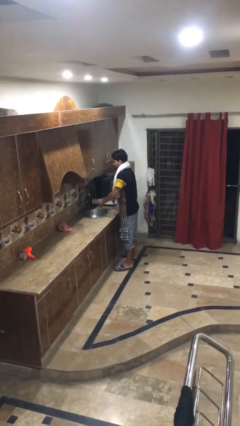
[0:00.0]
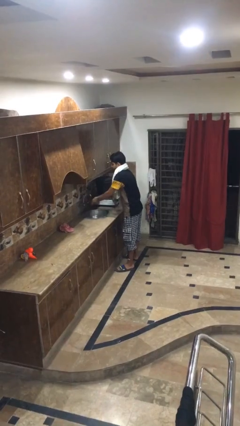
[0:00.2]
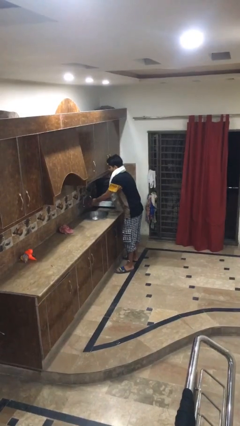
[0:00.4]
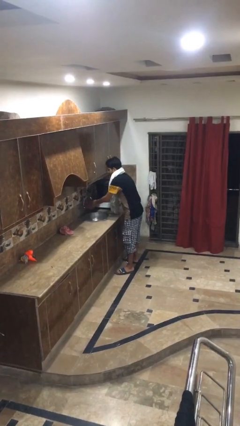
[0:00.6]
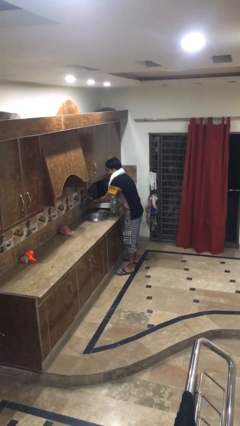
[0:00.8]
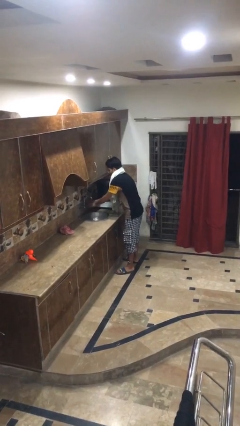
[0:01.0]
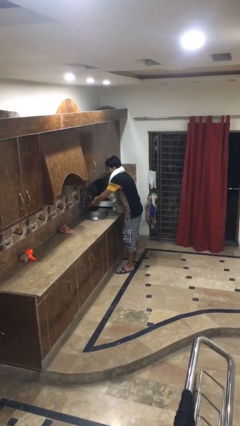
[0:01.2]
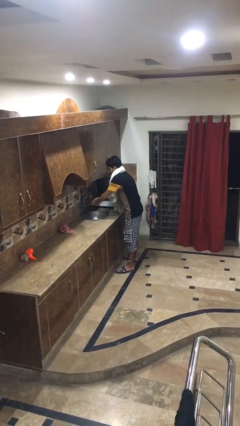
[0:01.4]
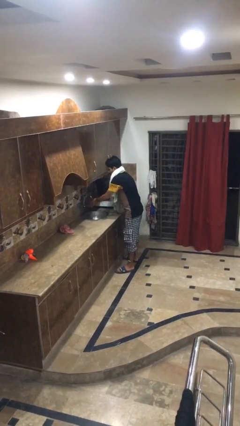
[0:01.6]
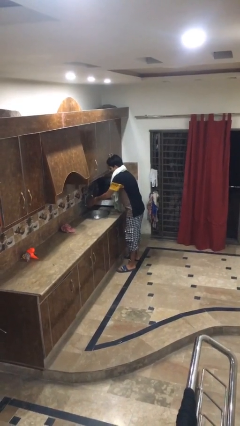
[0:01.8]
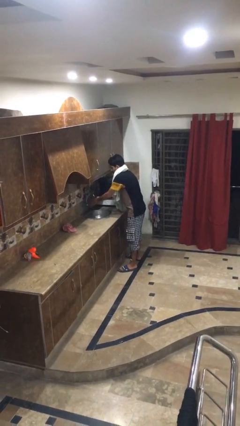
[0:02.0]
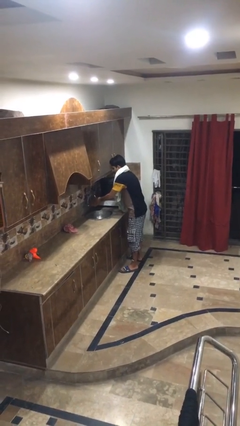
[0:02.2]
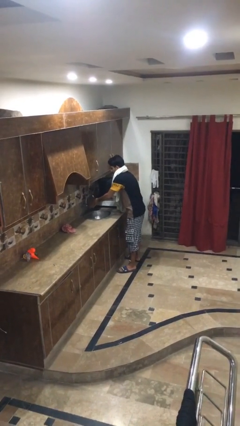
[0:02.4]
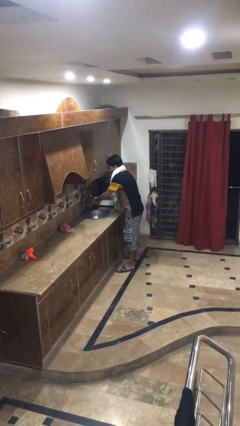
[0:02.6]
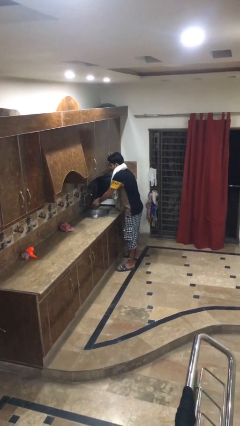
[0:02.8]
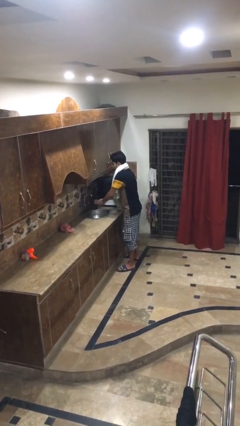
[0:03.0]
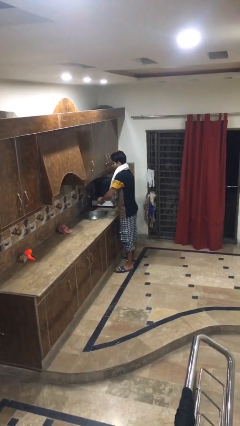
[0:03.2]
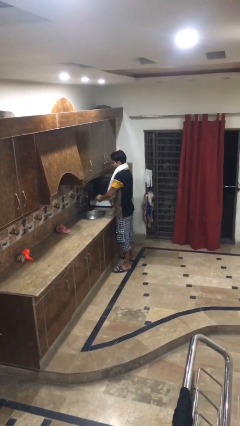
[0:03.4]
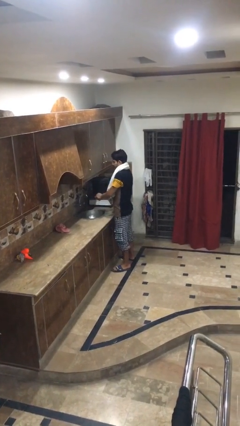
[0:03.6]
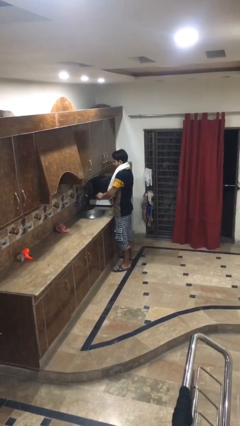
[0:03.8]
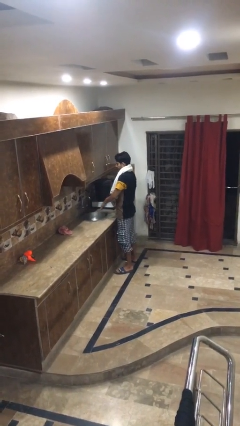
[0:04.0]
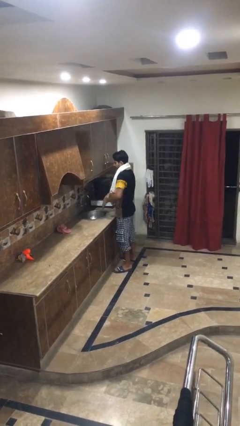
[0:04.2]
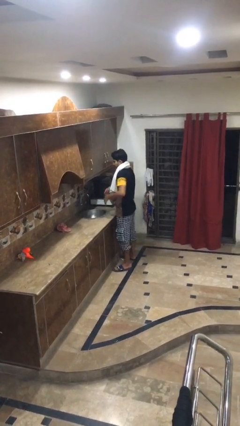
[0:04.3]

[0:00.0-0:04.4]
person washes hands

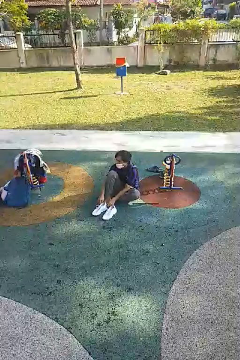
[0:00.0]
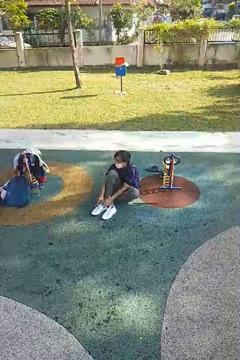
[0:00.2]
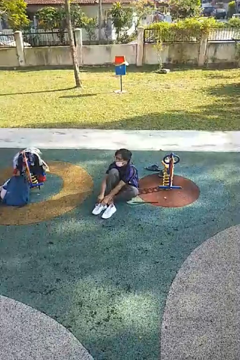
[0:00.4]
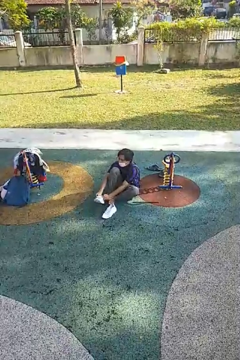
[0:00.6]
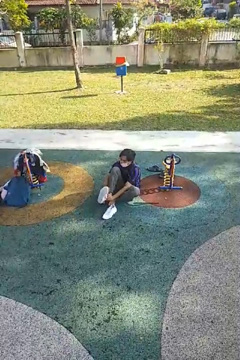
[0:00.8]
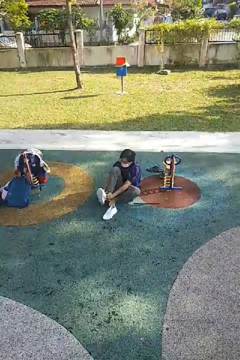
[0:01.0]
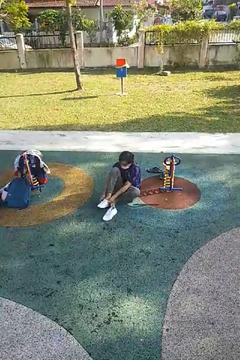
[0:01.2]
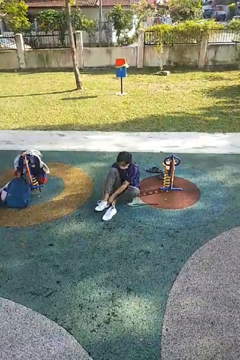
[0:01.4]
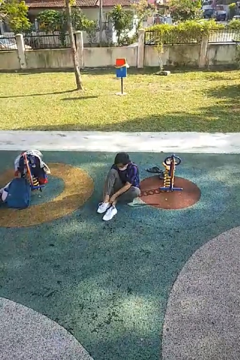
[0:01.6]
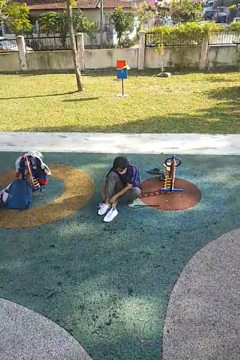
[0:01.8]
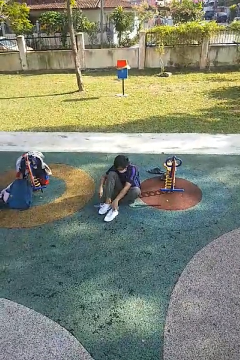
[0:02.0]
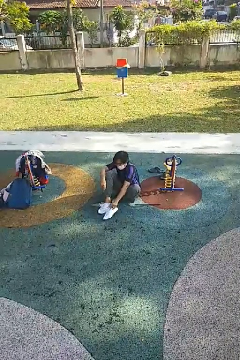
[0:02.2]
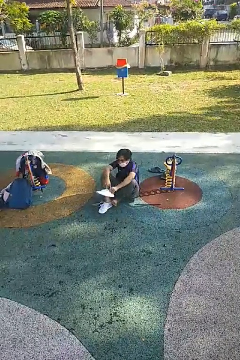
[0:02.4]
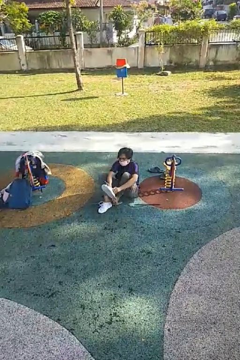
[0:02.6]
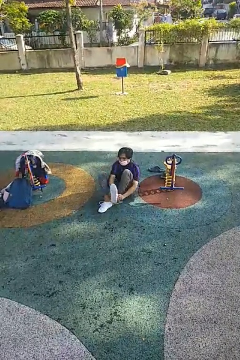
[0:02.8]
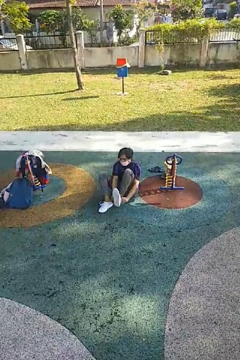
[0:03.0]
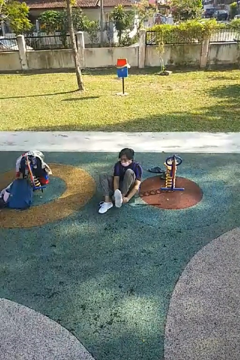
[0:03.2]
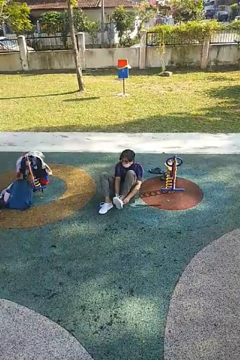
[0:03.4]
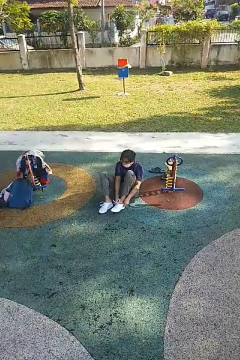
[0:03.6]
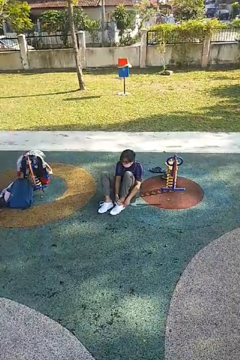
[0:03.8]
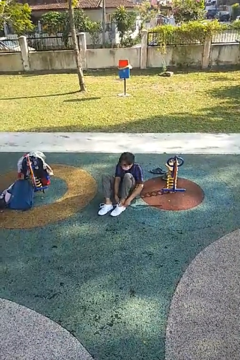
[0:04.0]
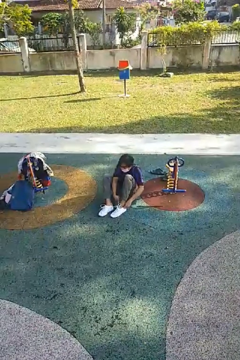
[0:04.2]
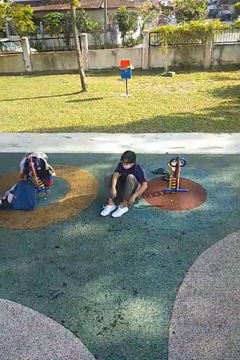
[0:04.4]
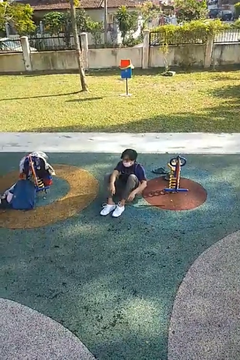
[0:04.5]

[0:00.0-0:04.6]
person puts on shoes

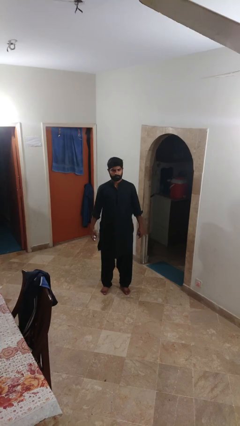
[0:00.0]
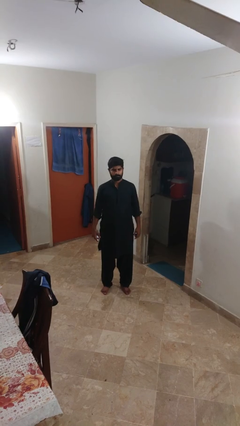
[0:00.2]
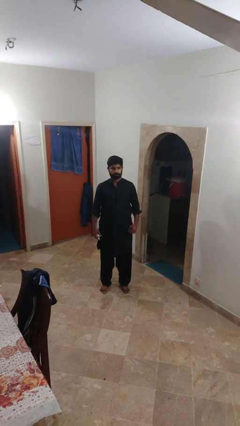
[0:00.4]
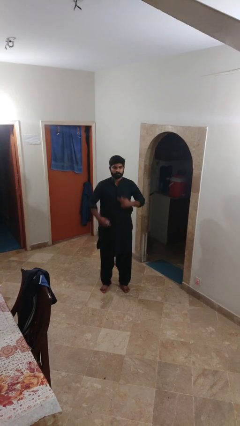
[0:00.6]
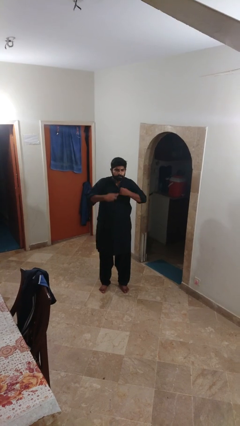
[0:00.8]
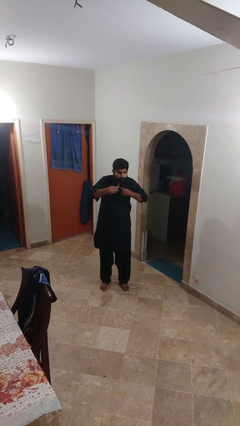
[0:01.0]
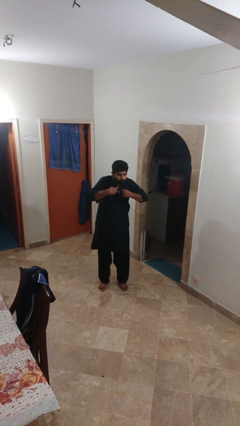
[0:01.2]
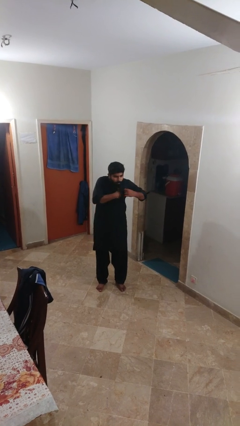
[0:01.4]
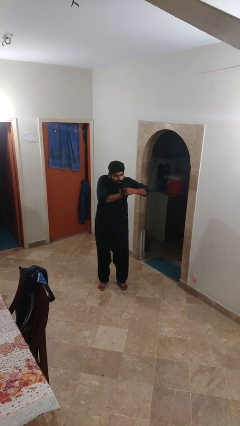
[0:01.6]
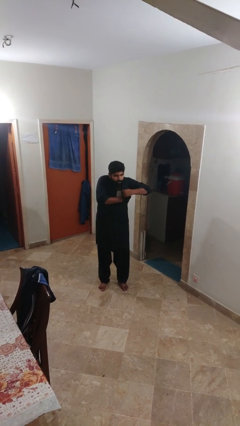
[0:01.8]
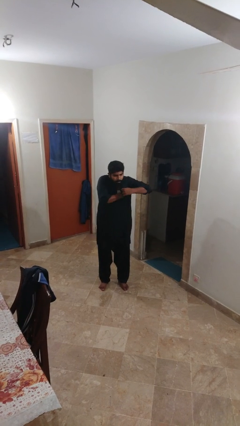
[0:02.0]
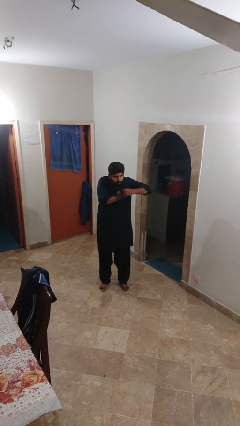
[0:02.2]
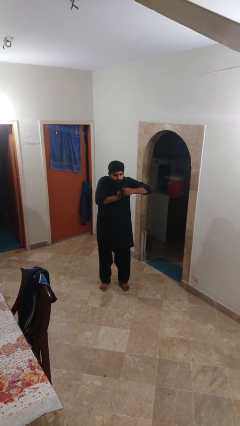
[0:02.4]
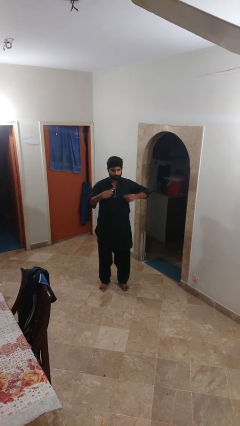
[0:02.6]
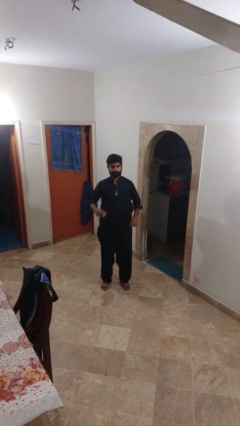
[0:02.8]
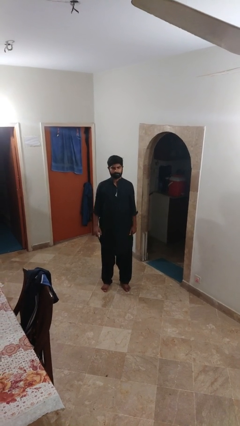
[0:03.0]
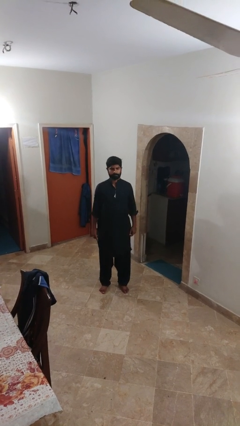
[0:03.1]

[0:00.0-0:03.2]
person applies deodorant

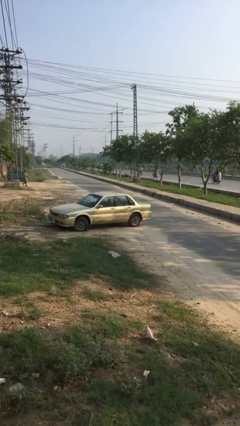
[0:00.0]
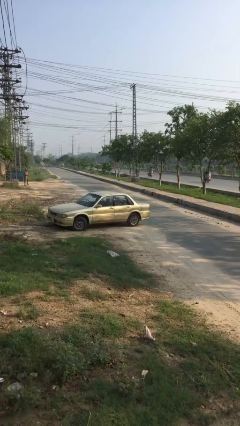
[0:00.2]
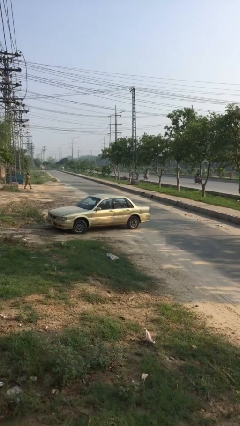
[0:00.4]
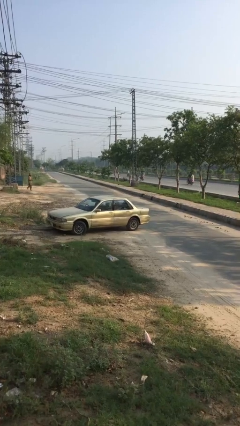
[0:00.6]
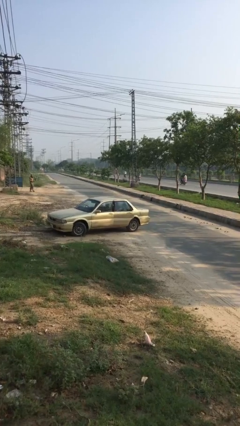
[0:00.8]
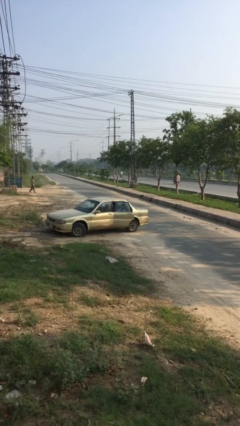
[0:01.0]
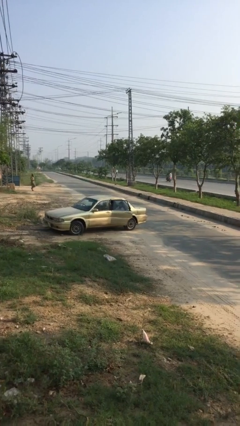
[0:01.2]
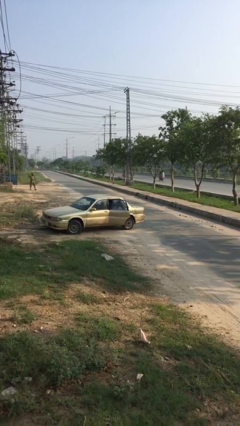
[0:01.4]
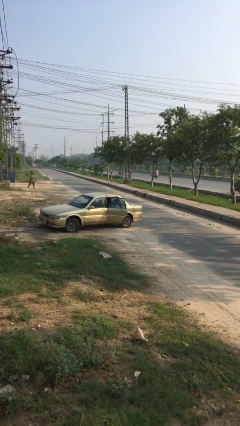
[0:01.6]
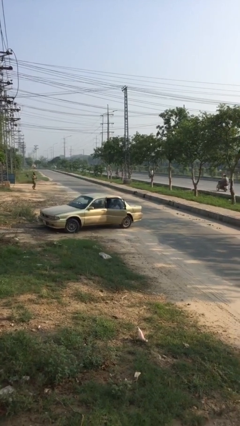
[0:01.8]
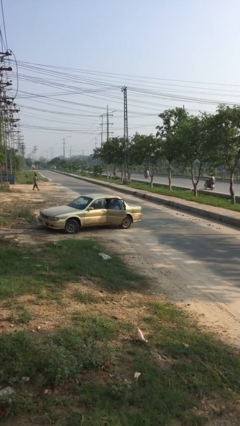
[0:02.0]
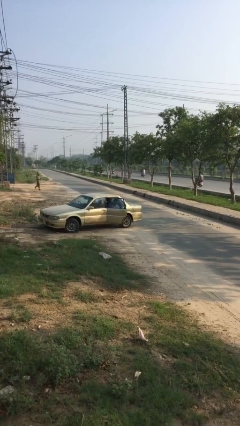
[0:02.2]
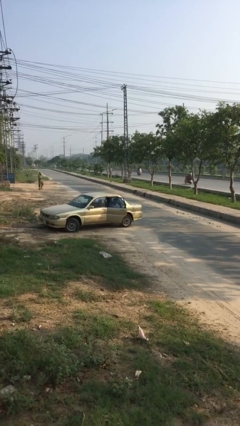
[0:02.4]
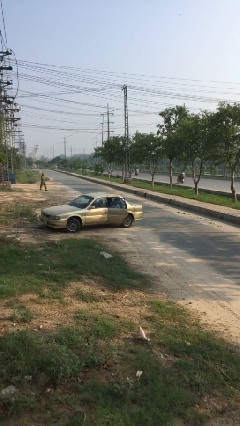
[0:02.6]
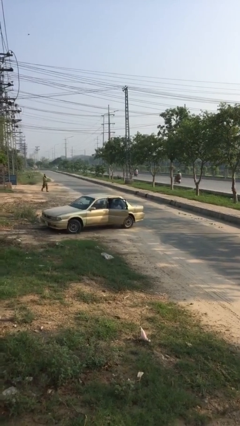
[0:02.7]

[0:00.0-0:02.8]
person opens car door

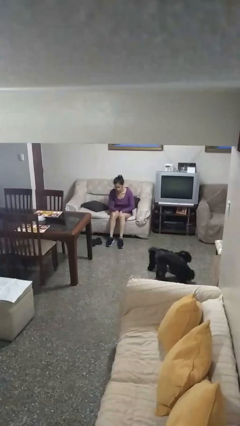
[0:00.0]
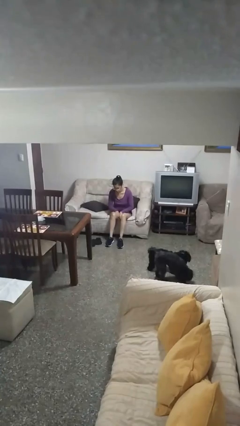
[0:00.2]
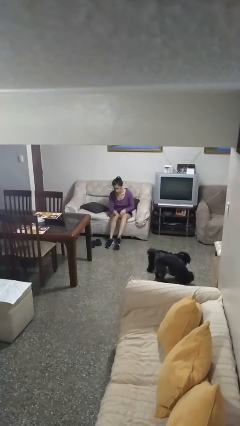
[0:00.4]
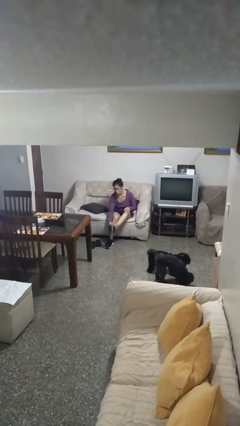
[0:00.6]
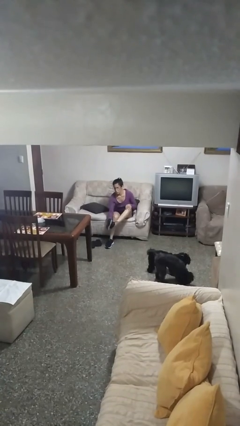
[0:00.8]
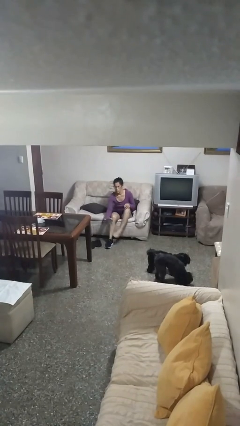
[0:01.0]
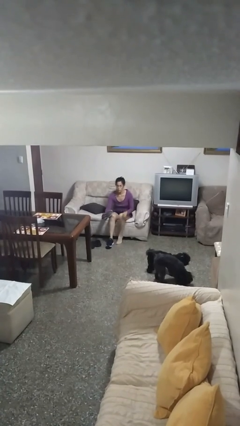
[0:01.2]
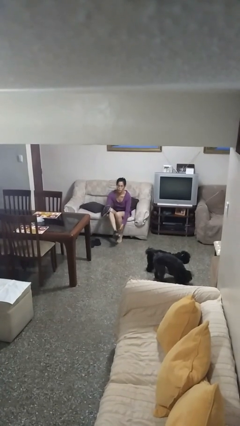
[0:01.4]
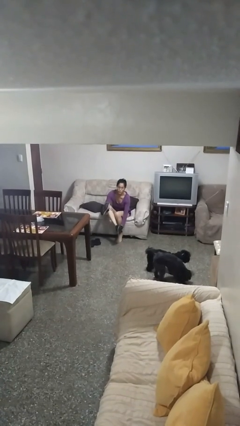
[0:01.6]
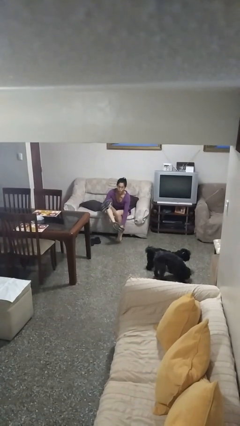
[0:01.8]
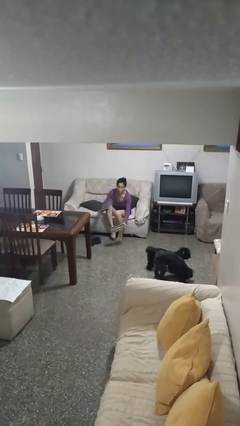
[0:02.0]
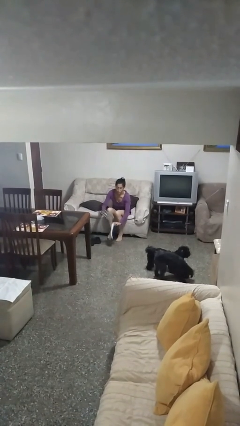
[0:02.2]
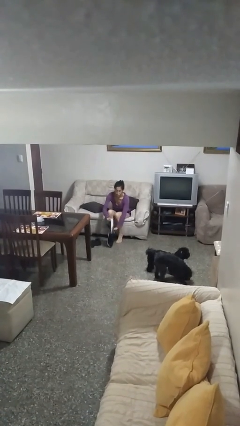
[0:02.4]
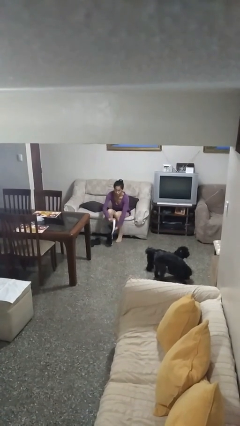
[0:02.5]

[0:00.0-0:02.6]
person takes off shoes

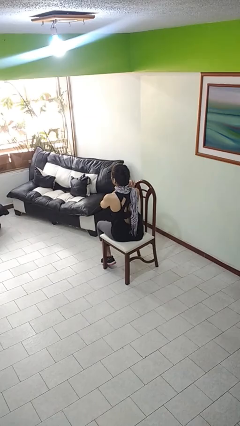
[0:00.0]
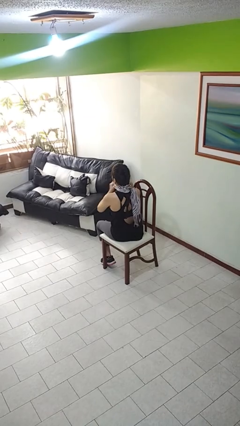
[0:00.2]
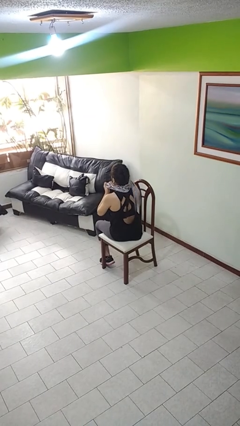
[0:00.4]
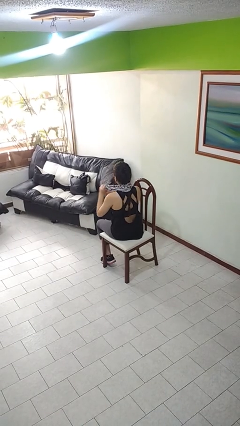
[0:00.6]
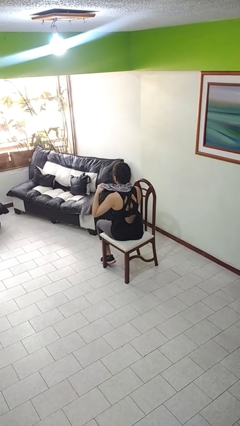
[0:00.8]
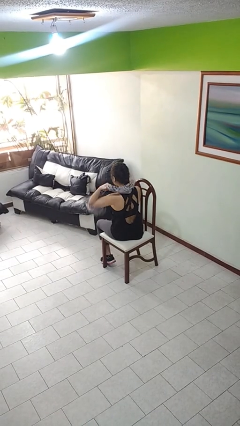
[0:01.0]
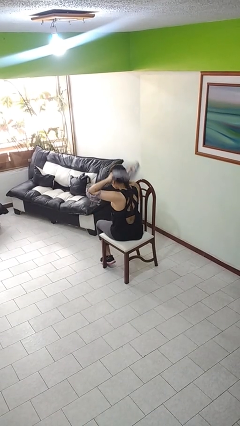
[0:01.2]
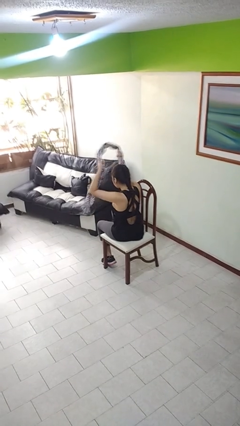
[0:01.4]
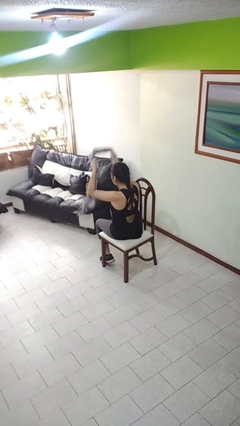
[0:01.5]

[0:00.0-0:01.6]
person takes off scarf
